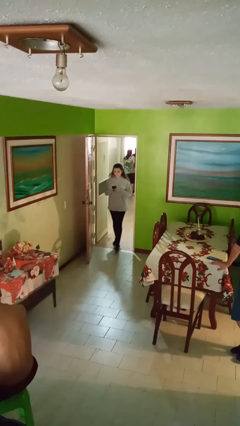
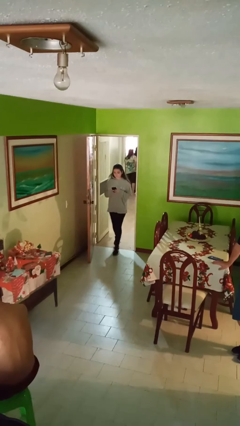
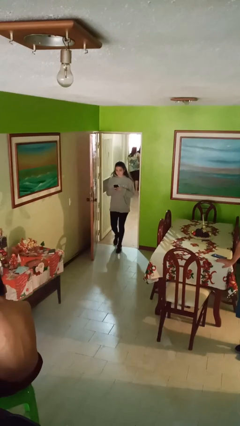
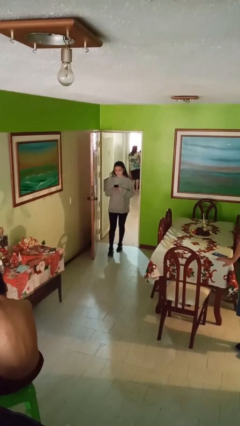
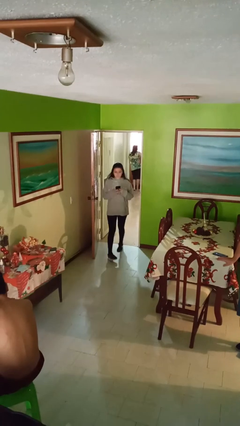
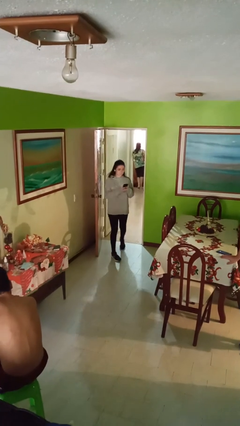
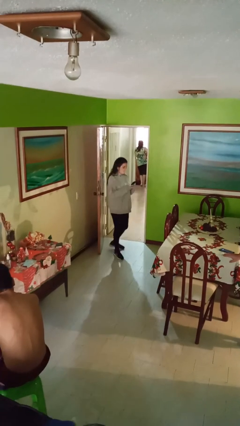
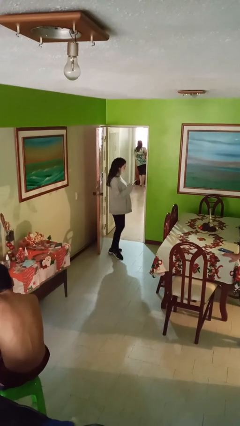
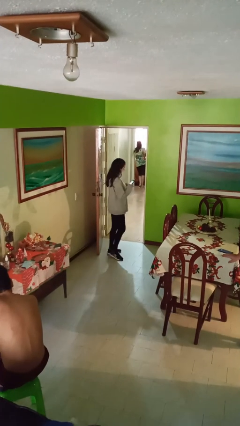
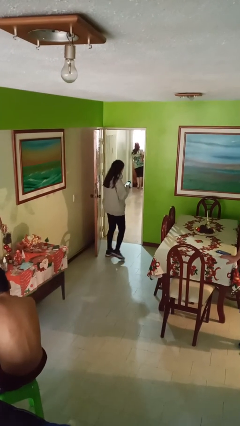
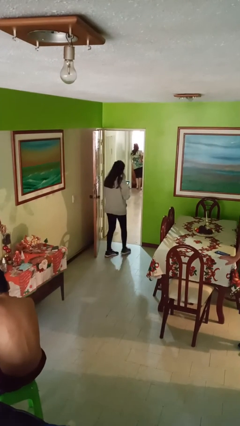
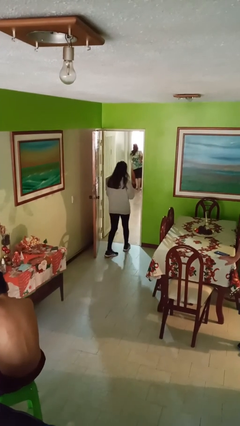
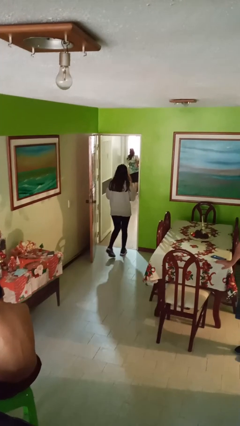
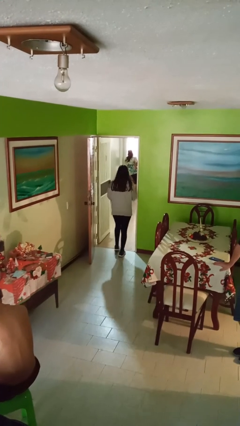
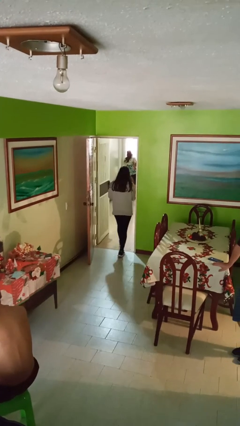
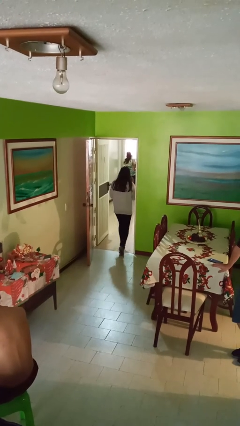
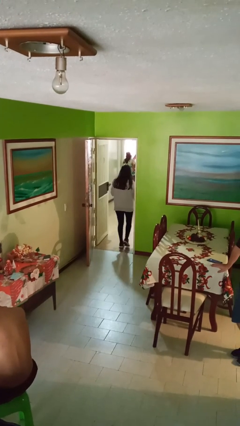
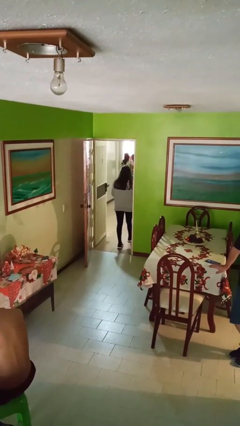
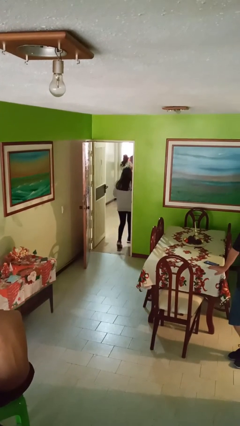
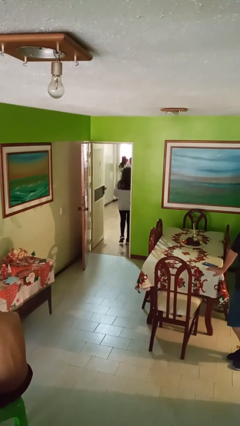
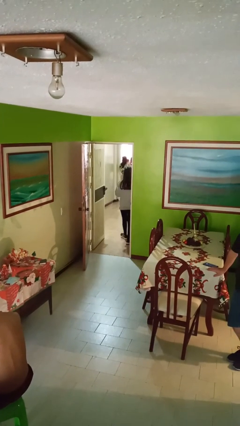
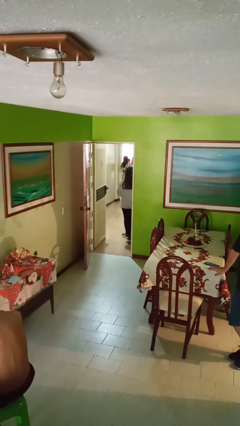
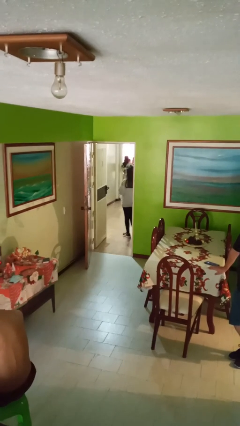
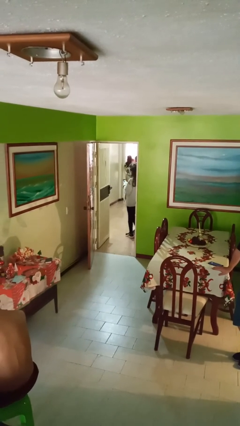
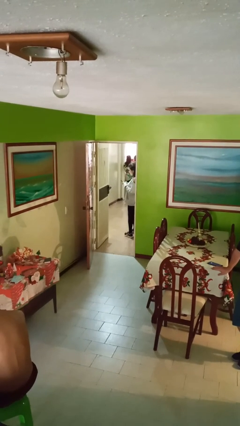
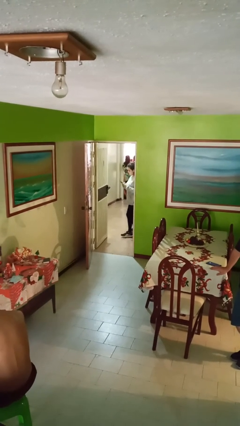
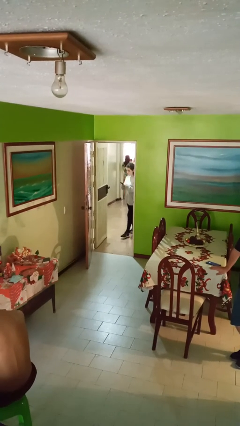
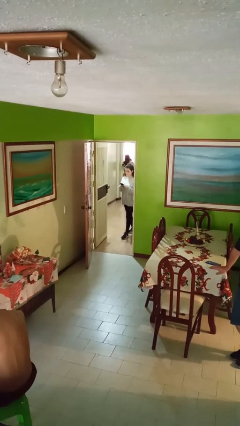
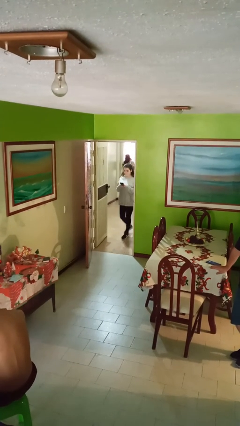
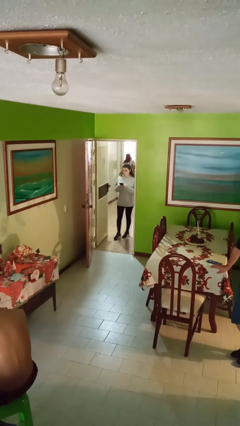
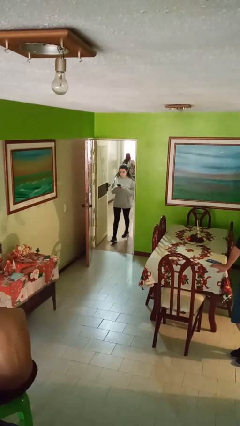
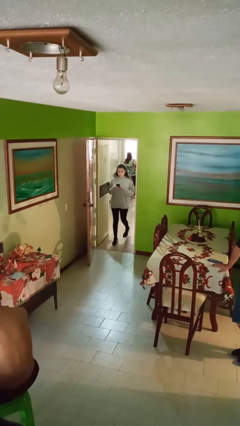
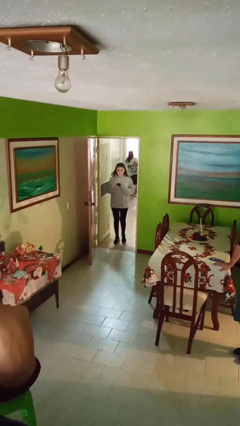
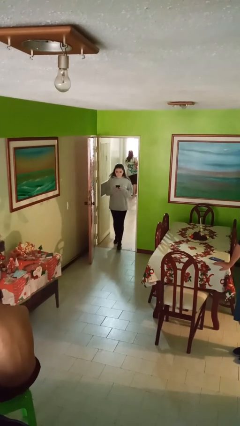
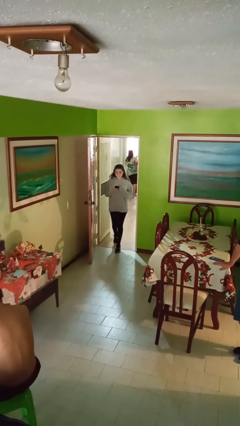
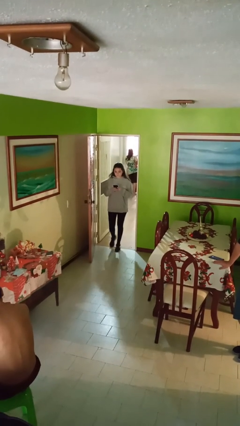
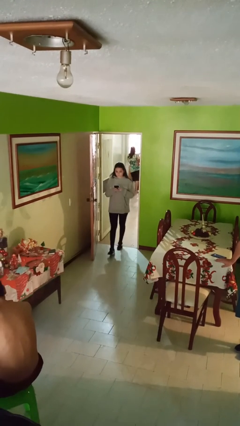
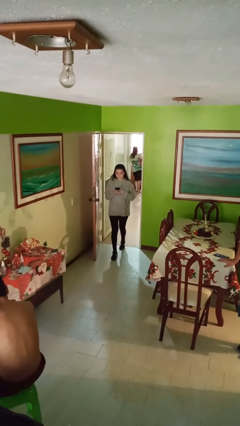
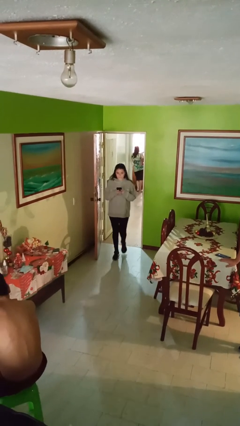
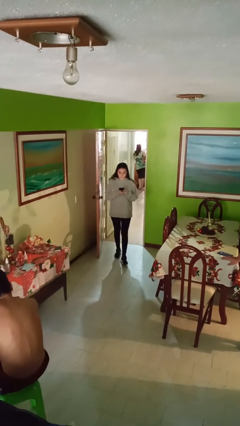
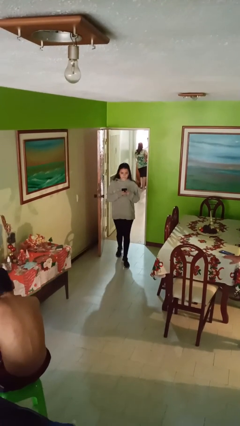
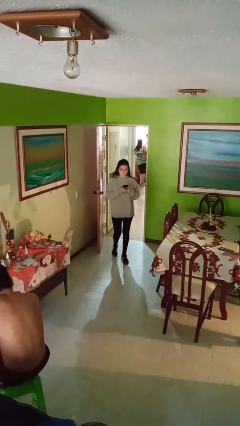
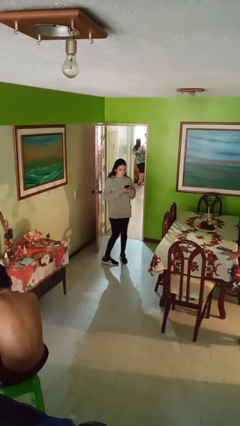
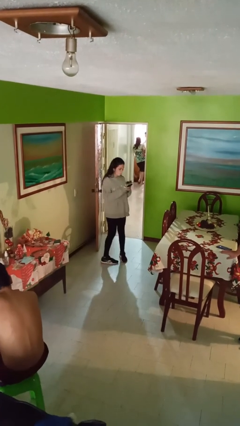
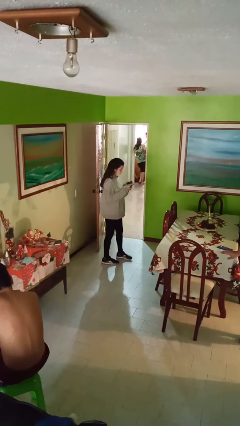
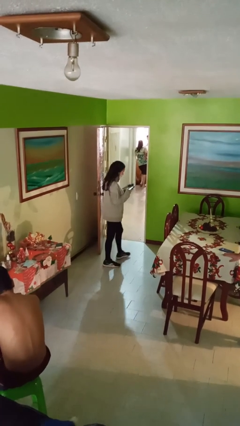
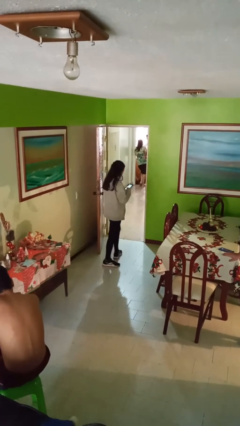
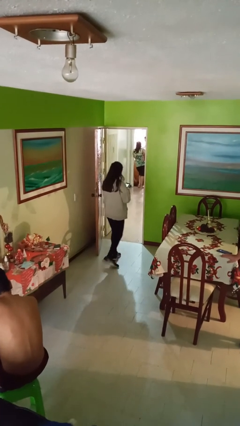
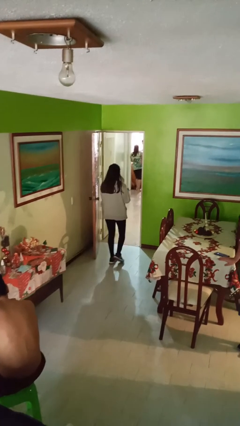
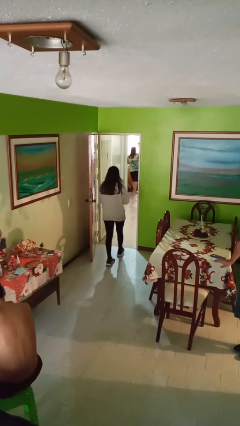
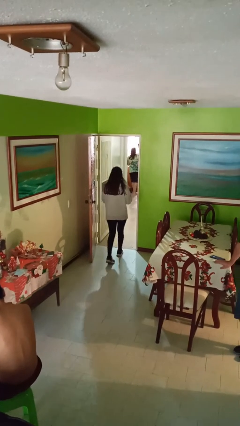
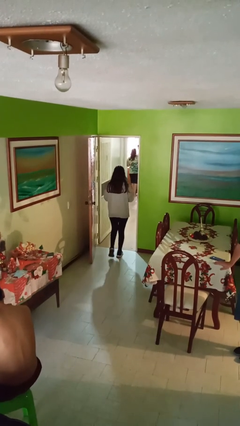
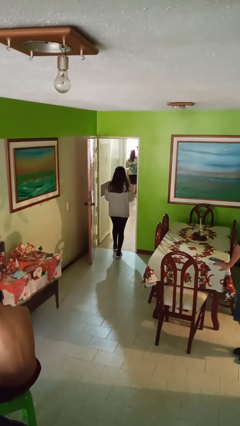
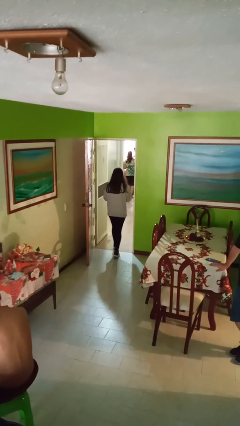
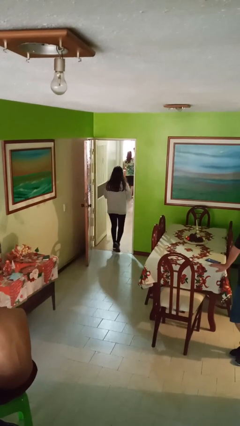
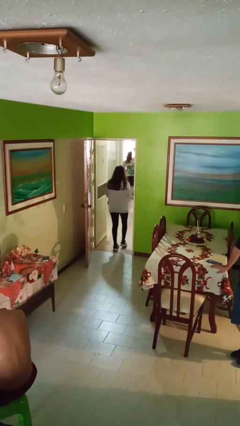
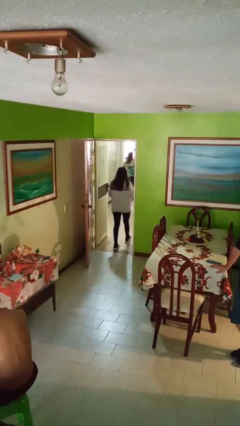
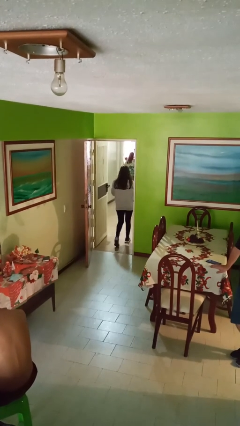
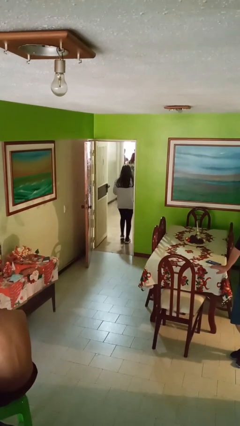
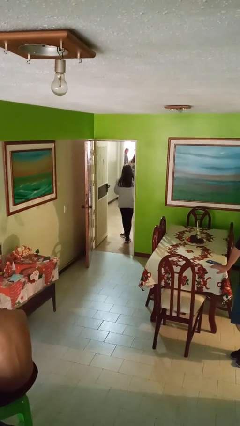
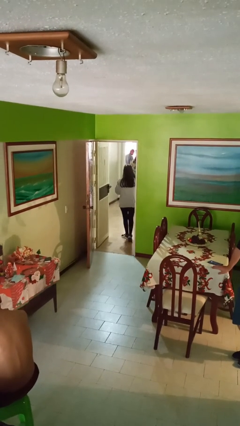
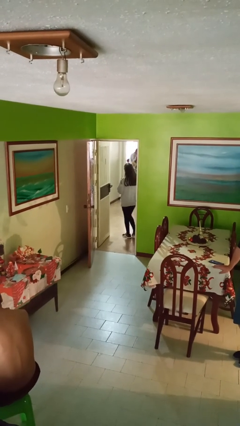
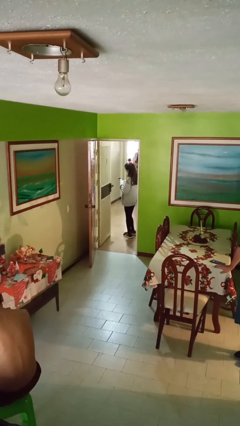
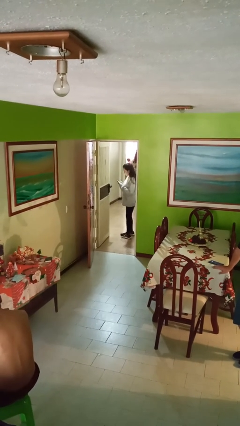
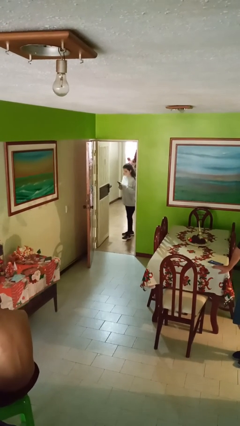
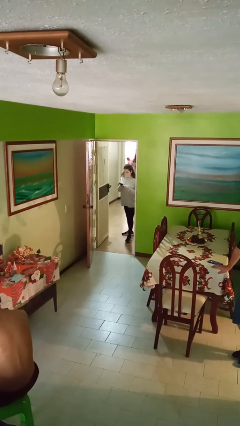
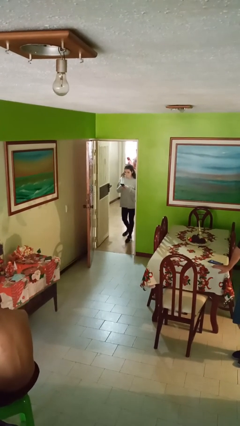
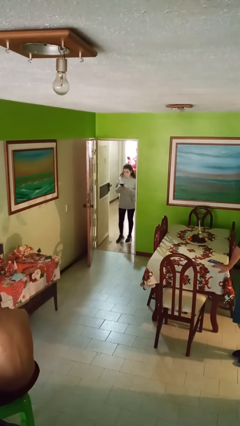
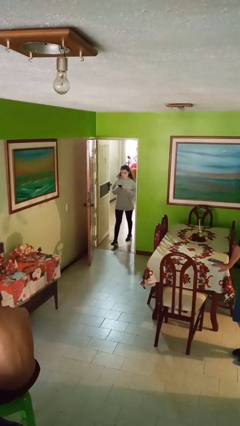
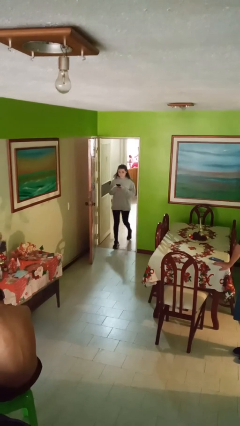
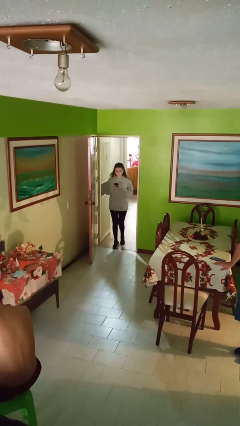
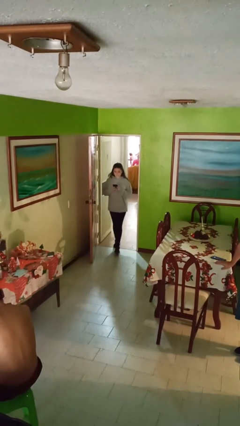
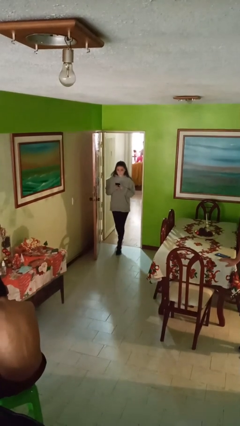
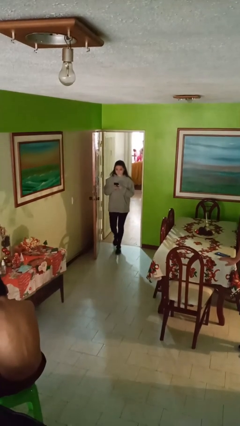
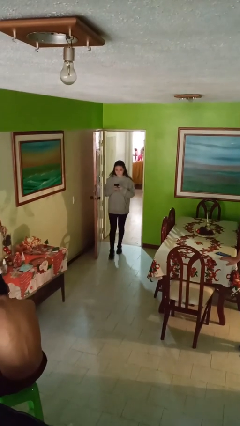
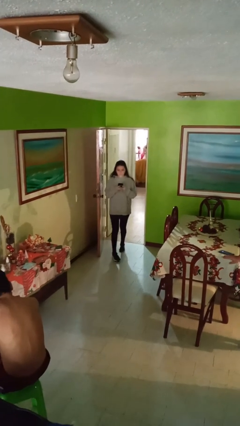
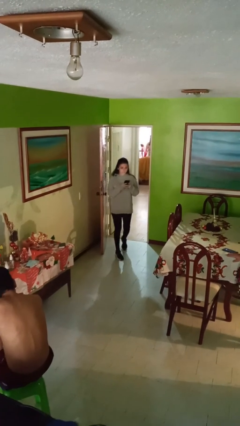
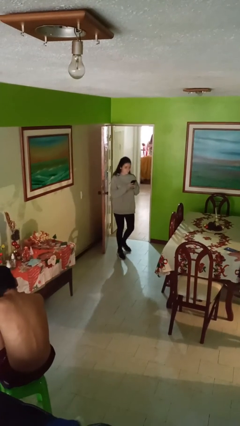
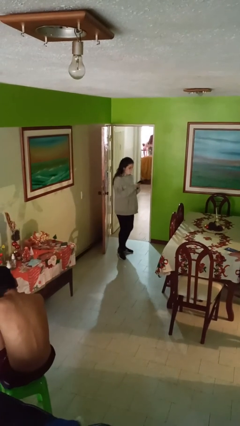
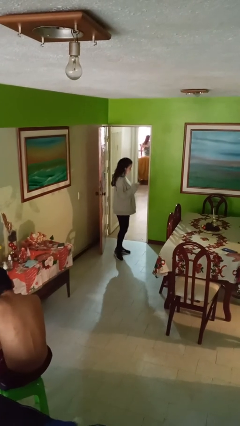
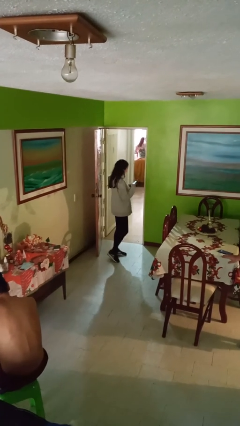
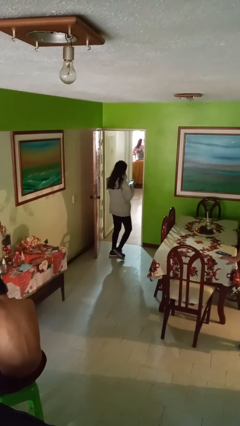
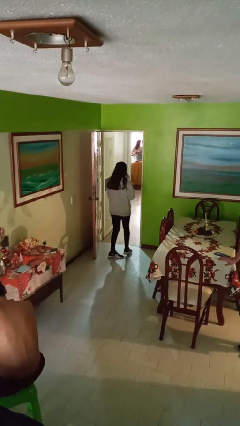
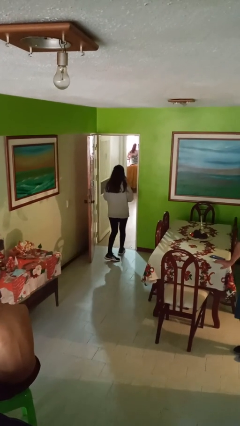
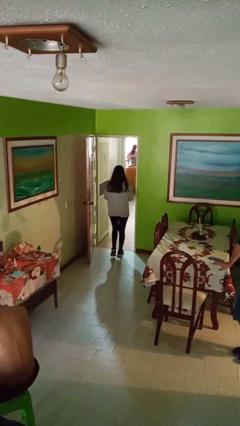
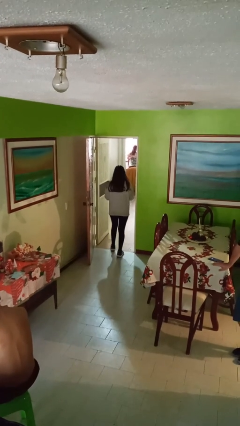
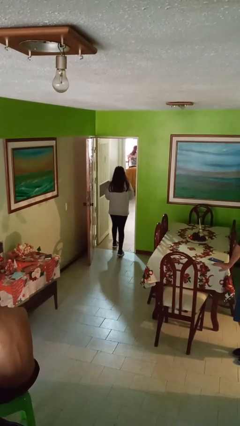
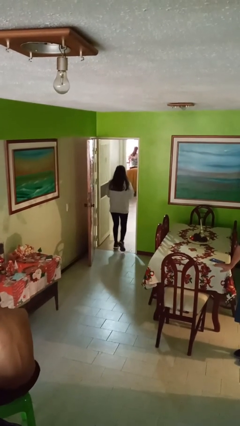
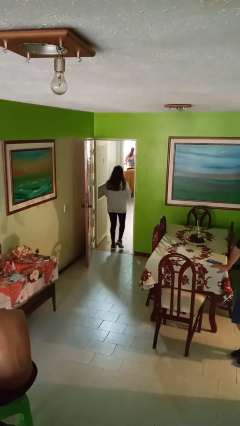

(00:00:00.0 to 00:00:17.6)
person texts on phone

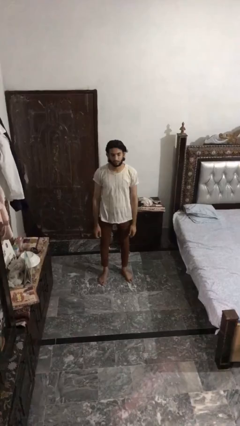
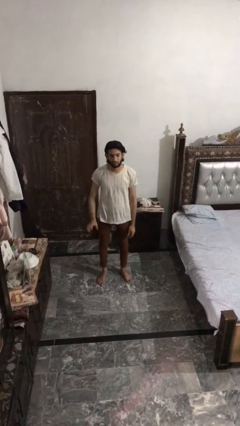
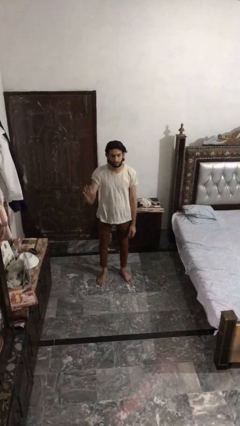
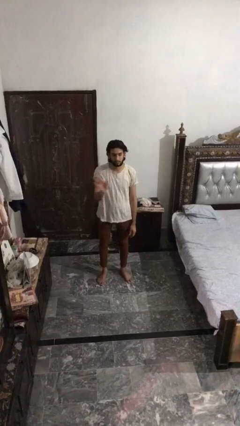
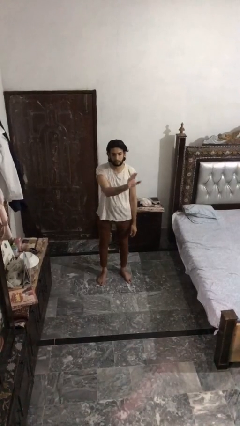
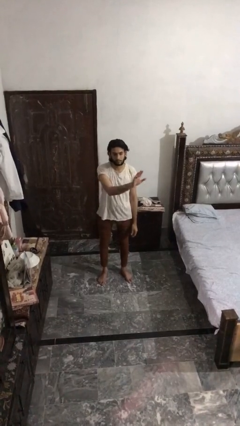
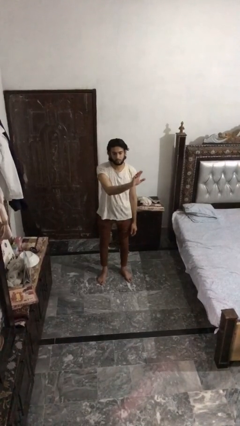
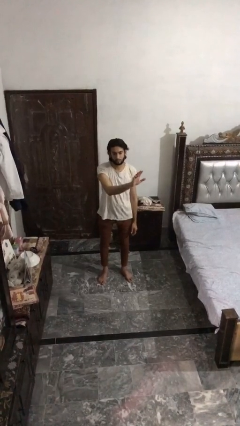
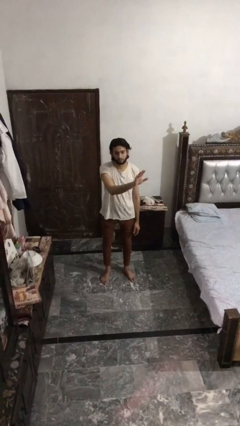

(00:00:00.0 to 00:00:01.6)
person gestures swipe left
